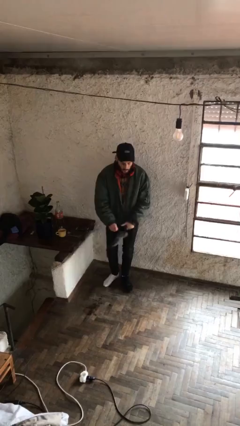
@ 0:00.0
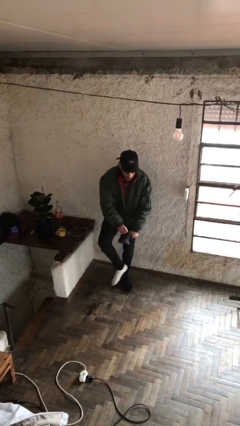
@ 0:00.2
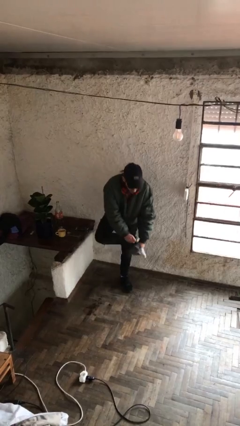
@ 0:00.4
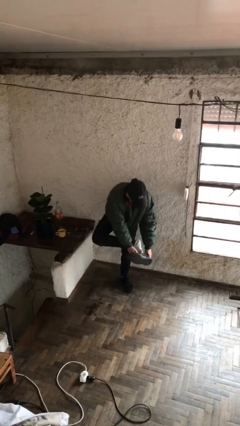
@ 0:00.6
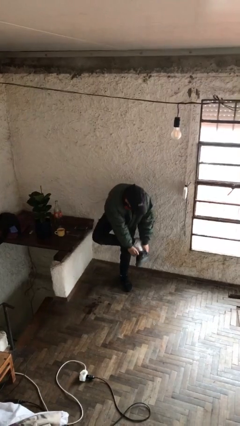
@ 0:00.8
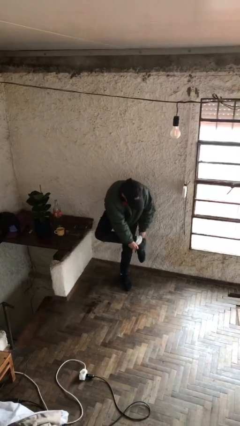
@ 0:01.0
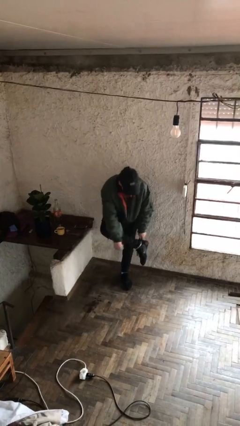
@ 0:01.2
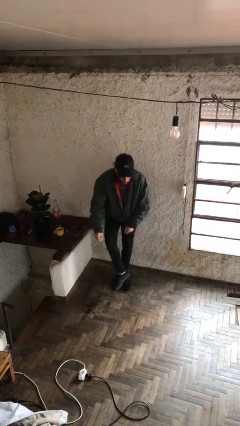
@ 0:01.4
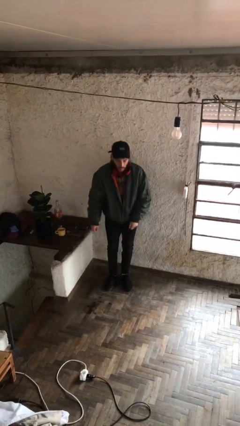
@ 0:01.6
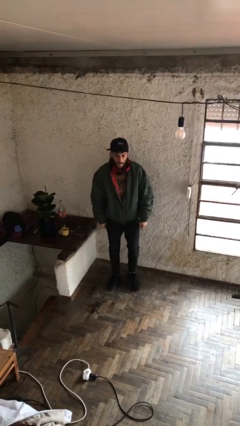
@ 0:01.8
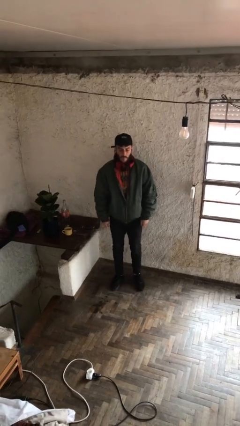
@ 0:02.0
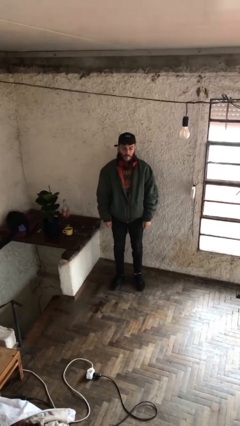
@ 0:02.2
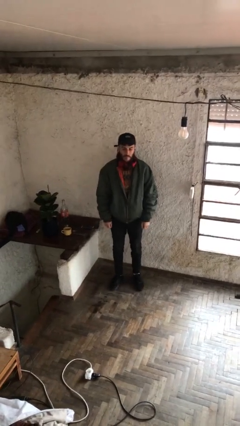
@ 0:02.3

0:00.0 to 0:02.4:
person puts on shoes

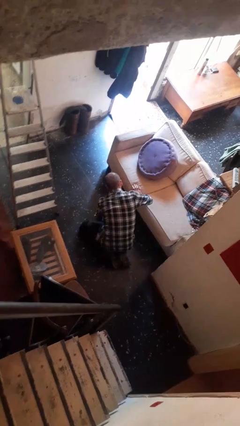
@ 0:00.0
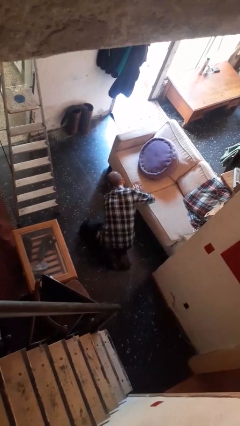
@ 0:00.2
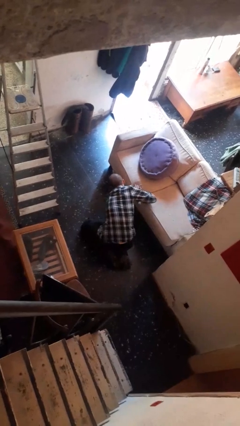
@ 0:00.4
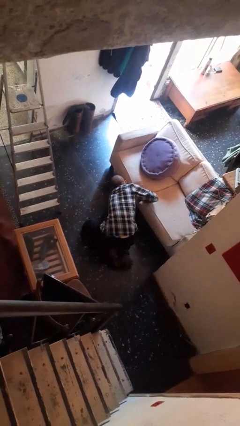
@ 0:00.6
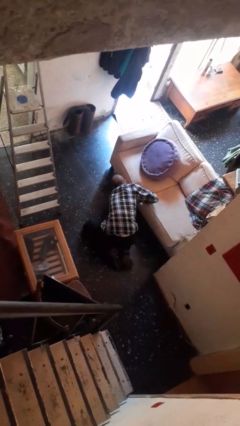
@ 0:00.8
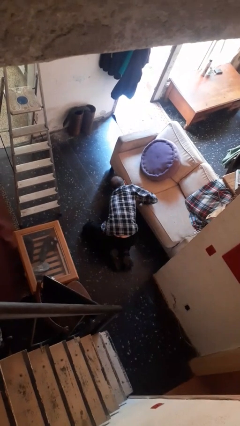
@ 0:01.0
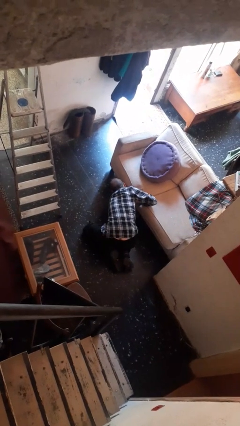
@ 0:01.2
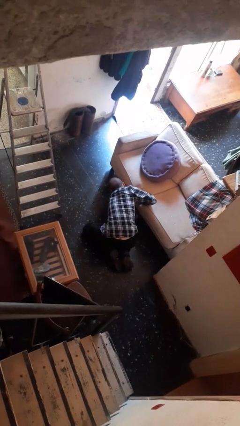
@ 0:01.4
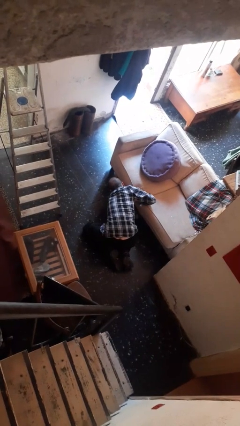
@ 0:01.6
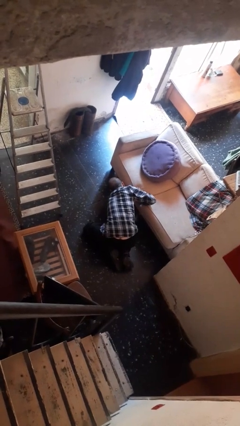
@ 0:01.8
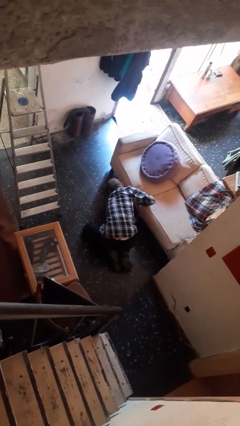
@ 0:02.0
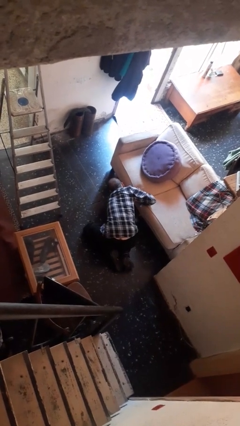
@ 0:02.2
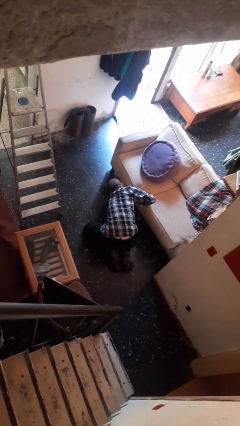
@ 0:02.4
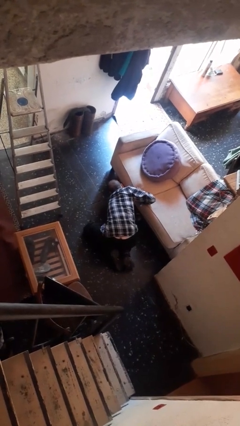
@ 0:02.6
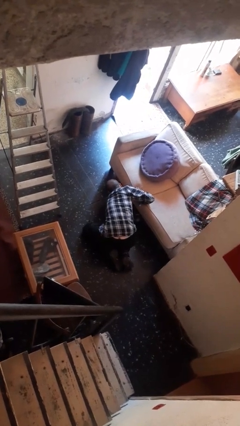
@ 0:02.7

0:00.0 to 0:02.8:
person searches under couch

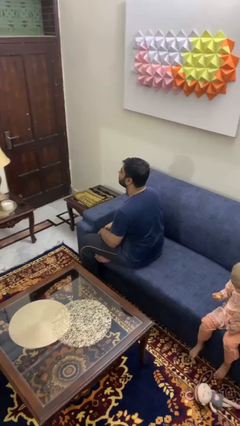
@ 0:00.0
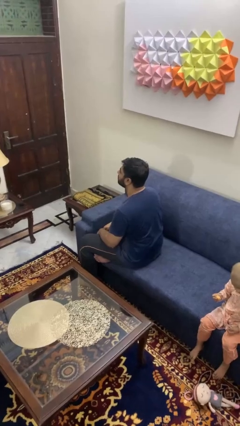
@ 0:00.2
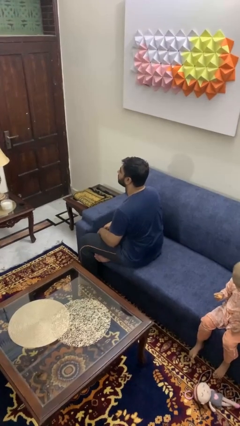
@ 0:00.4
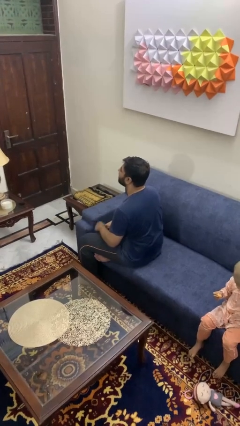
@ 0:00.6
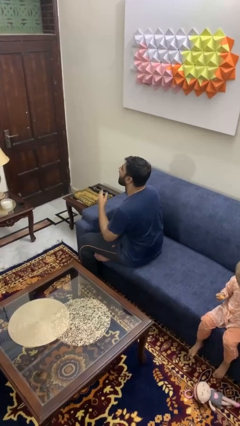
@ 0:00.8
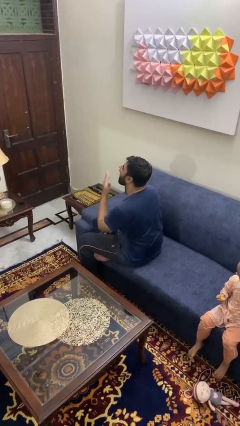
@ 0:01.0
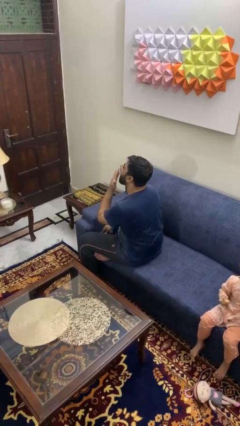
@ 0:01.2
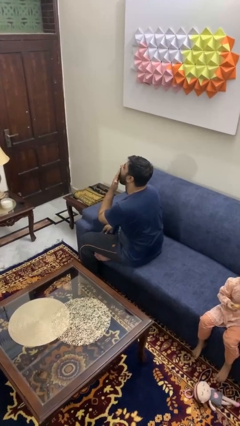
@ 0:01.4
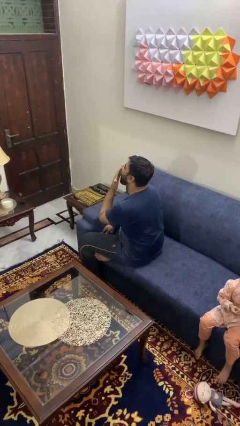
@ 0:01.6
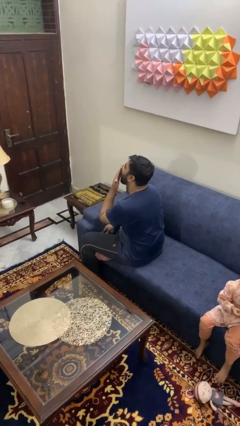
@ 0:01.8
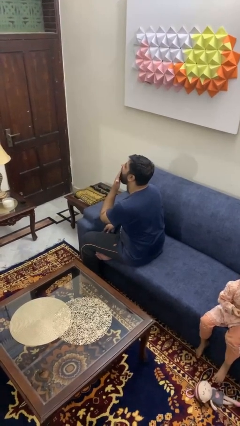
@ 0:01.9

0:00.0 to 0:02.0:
person yawns

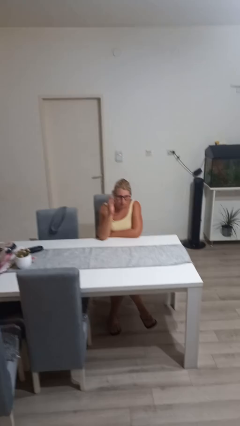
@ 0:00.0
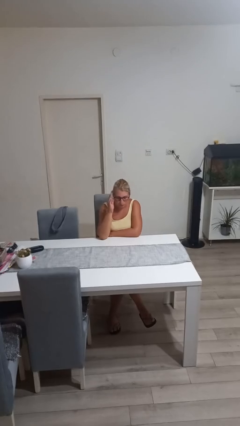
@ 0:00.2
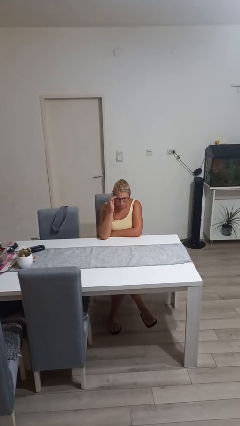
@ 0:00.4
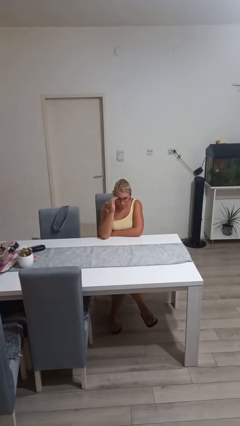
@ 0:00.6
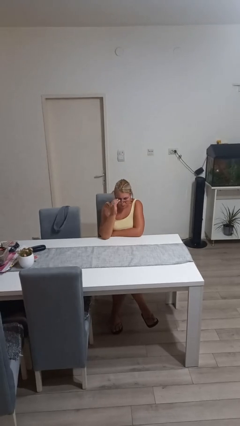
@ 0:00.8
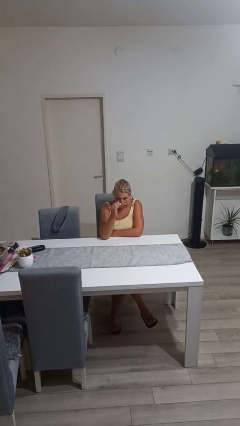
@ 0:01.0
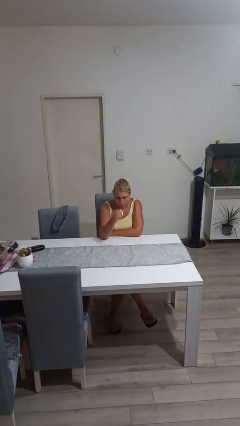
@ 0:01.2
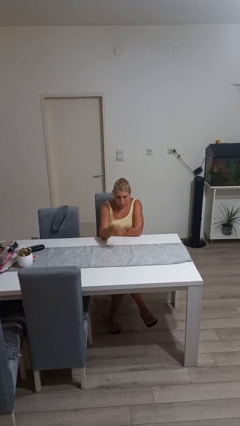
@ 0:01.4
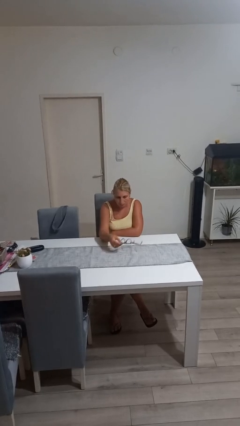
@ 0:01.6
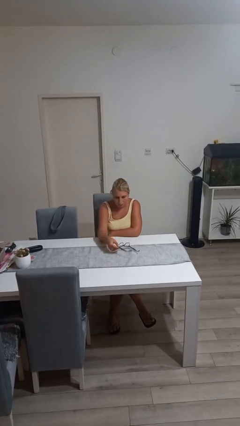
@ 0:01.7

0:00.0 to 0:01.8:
person takes off glasses

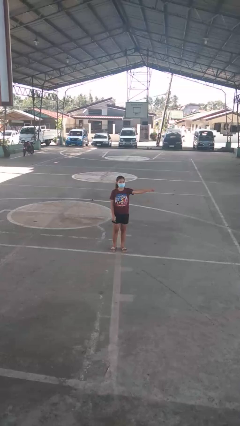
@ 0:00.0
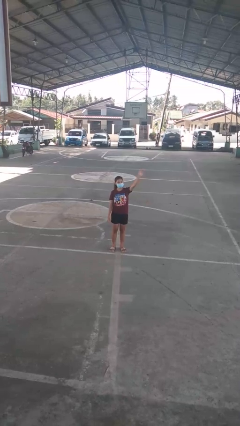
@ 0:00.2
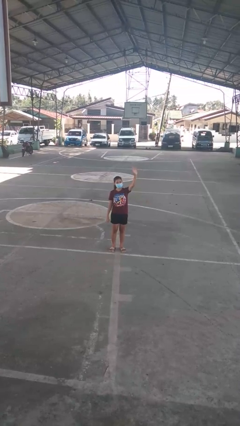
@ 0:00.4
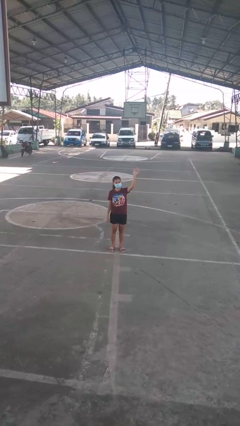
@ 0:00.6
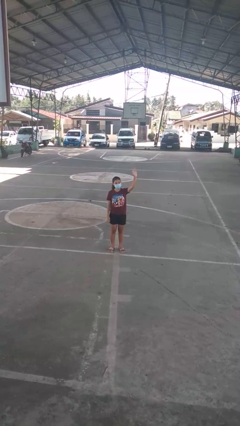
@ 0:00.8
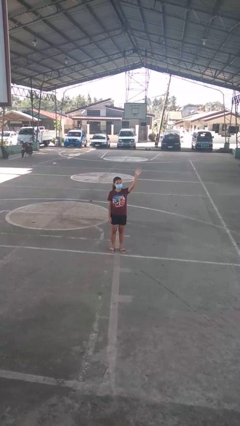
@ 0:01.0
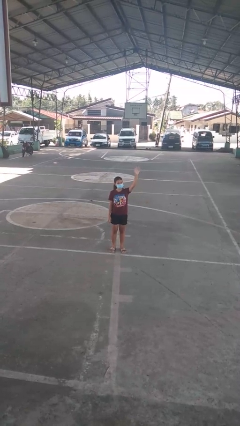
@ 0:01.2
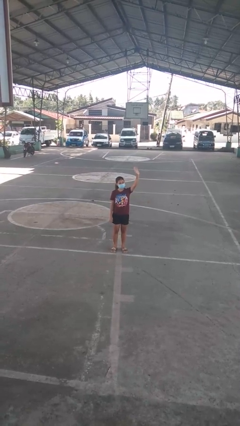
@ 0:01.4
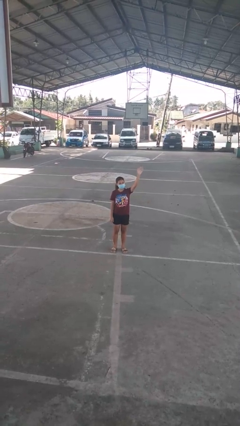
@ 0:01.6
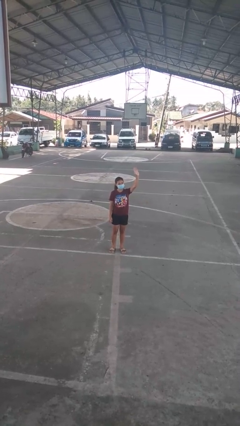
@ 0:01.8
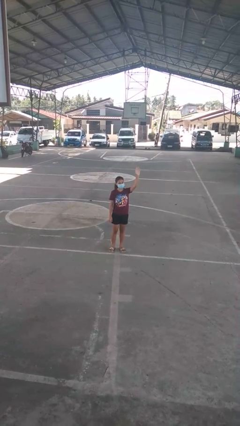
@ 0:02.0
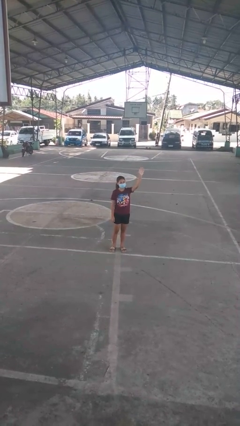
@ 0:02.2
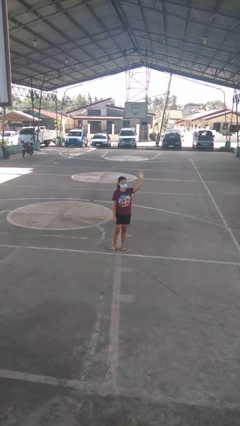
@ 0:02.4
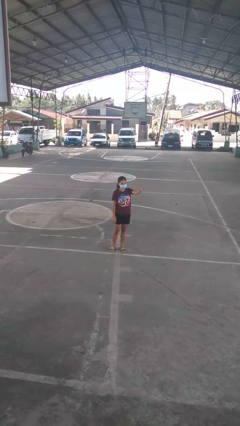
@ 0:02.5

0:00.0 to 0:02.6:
person waves at person

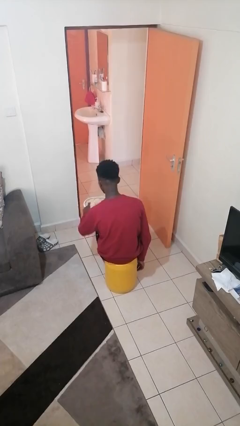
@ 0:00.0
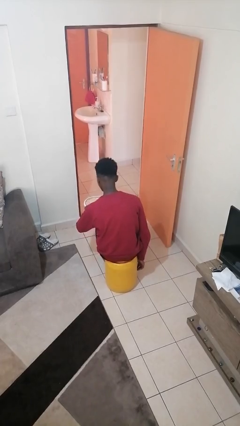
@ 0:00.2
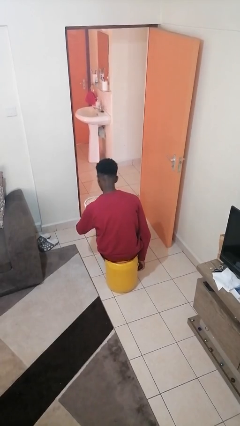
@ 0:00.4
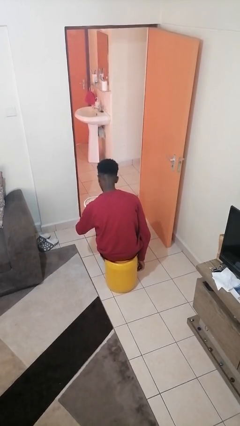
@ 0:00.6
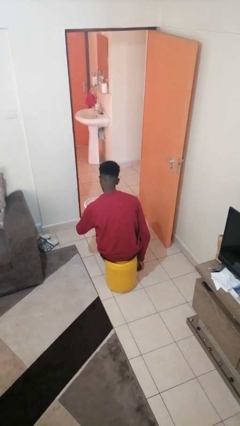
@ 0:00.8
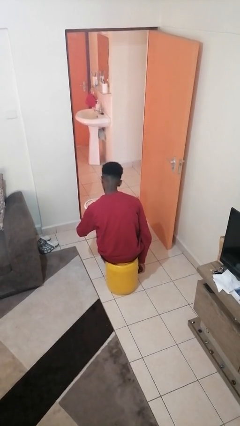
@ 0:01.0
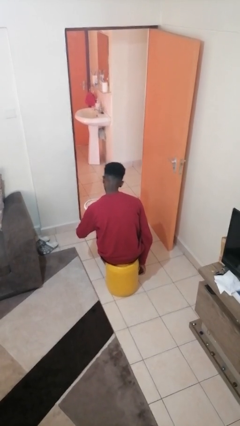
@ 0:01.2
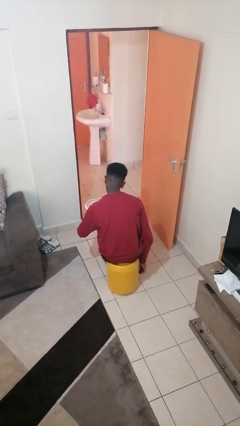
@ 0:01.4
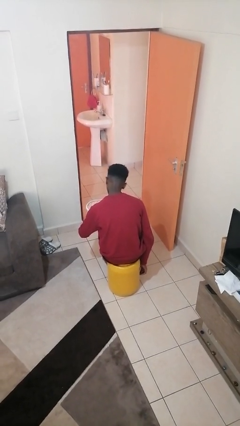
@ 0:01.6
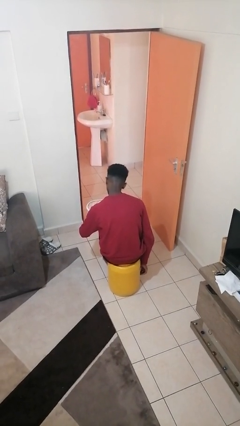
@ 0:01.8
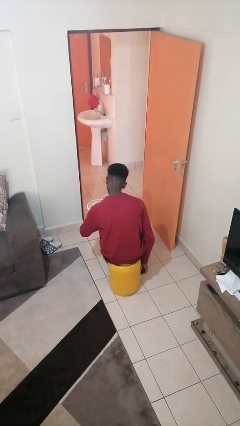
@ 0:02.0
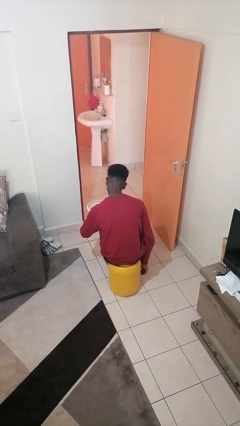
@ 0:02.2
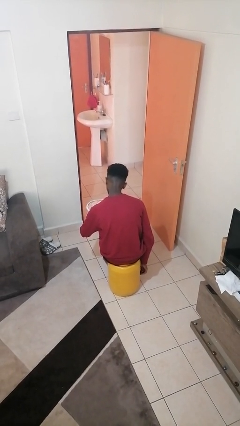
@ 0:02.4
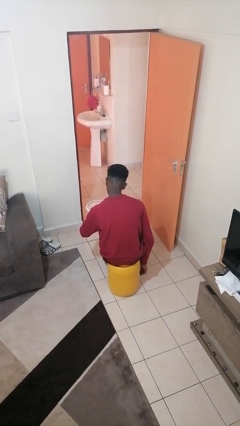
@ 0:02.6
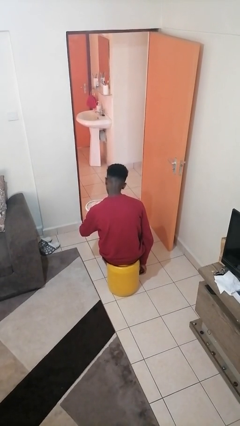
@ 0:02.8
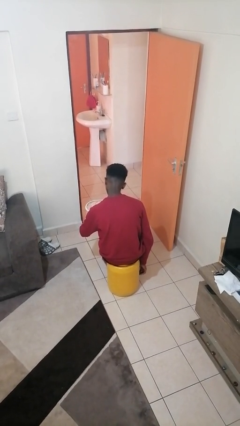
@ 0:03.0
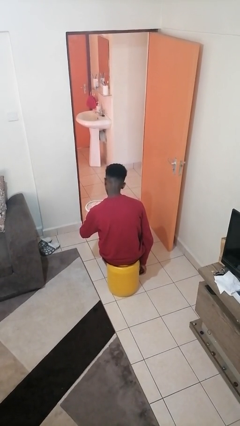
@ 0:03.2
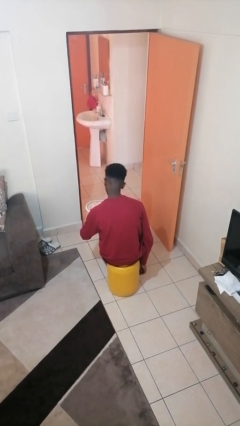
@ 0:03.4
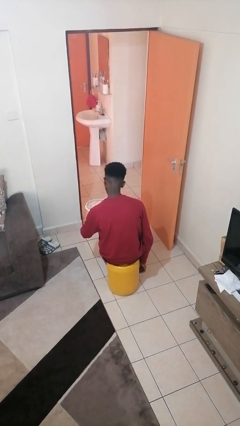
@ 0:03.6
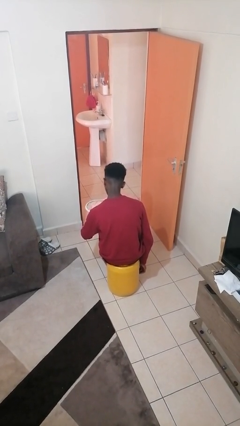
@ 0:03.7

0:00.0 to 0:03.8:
person taps object with finger

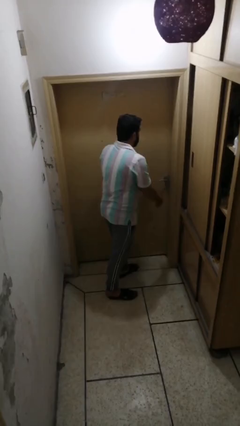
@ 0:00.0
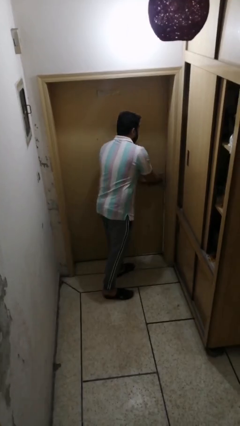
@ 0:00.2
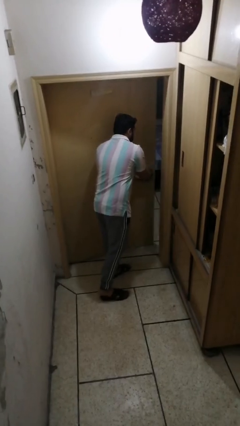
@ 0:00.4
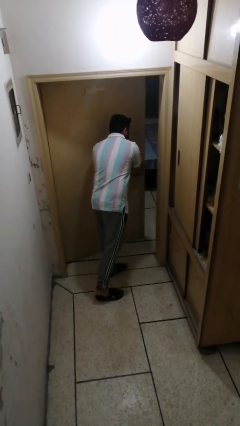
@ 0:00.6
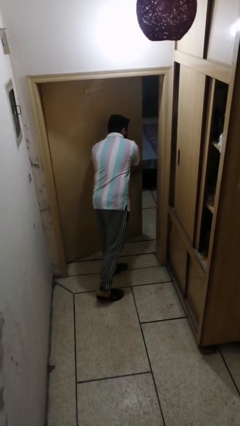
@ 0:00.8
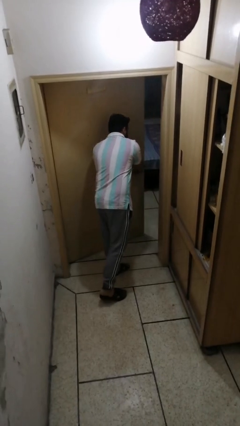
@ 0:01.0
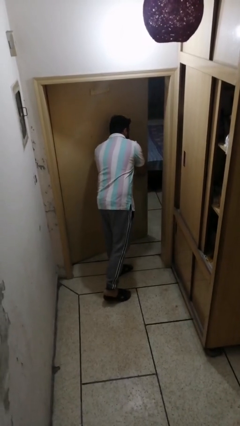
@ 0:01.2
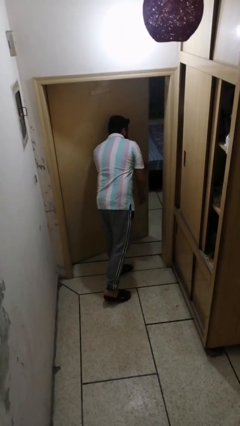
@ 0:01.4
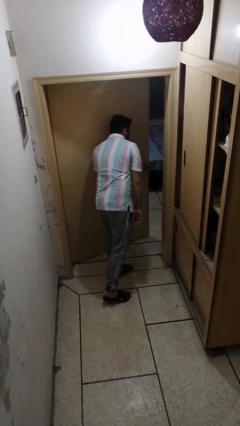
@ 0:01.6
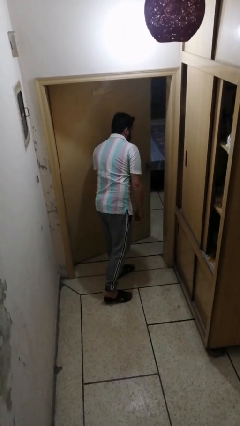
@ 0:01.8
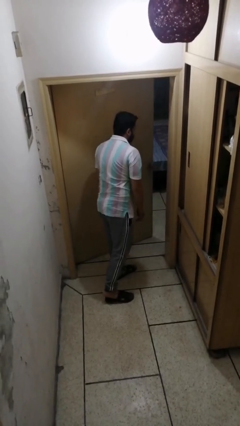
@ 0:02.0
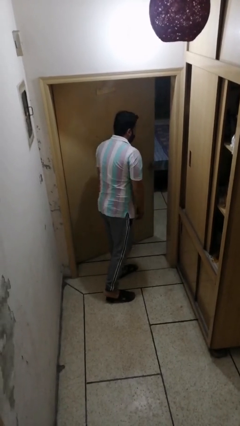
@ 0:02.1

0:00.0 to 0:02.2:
person opens facility door
